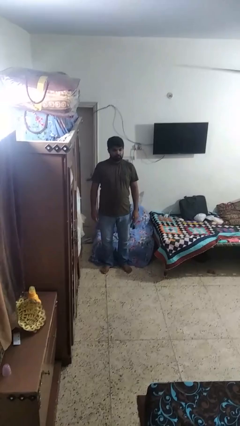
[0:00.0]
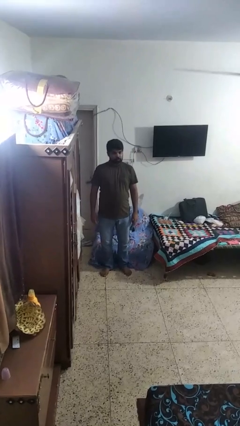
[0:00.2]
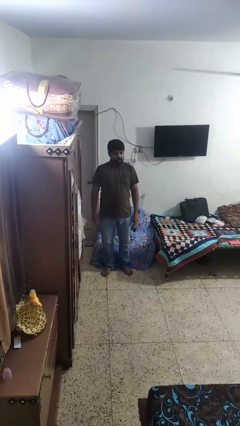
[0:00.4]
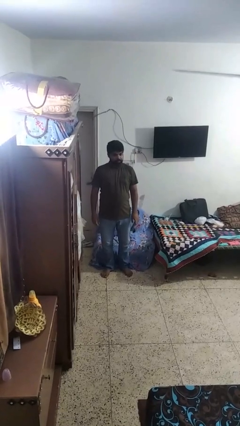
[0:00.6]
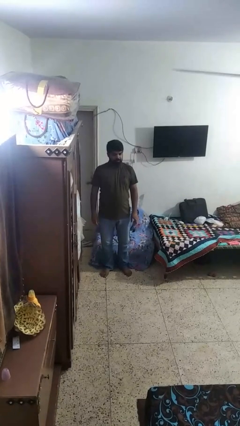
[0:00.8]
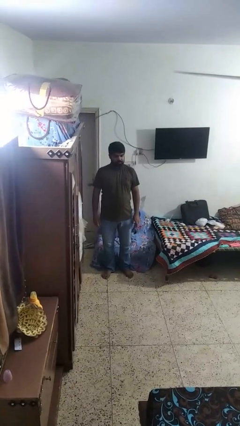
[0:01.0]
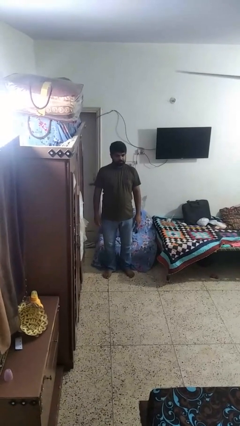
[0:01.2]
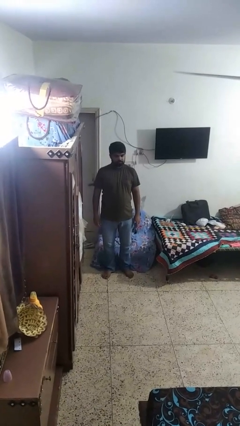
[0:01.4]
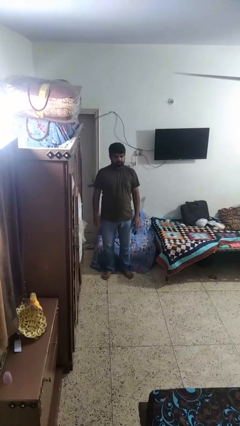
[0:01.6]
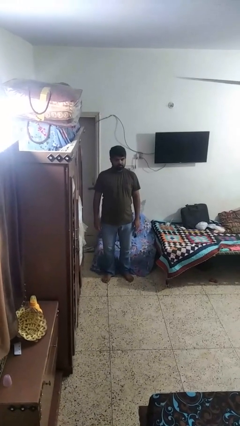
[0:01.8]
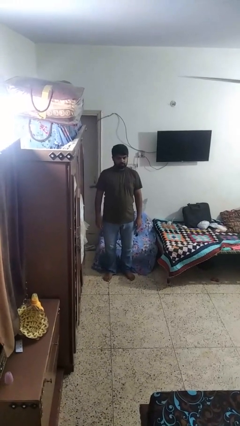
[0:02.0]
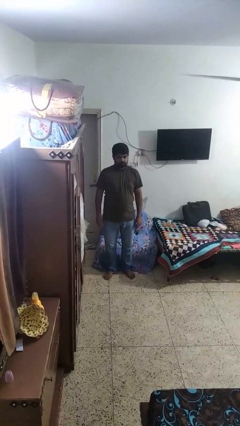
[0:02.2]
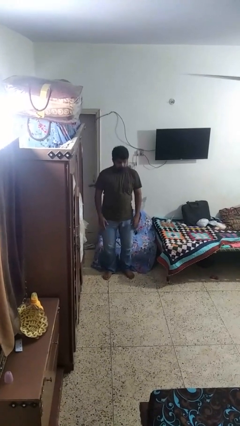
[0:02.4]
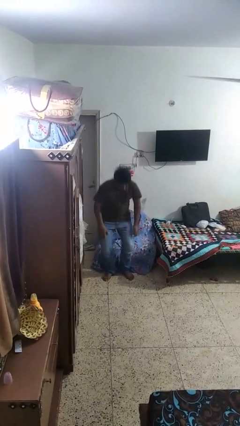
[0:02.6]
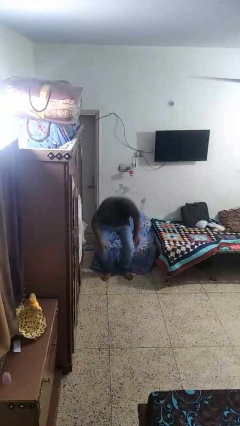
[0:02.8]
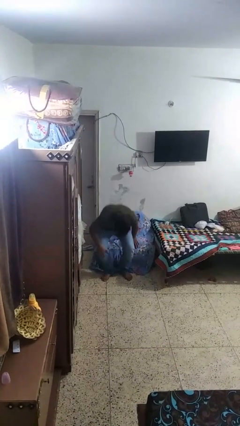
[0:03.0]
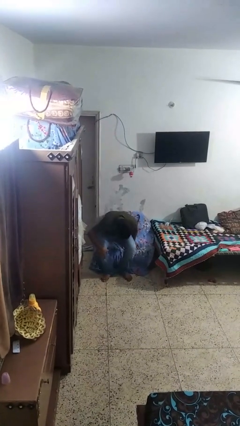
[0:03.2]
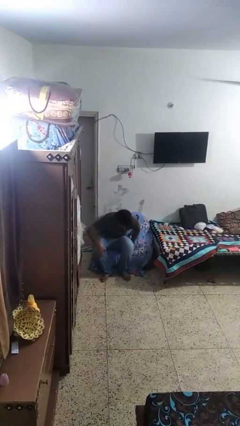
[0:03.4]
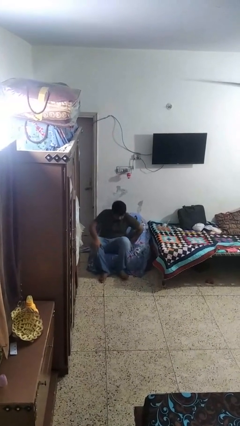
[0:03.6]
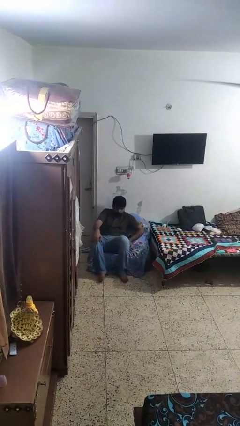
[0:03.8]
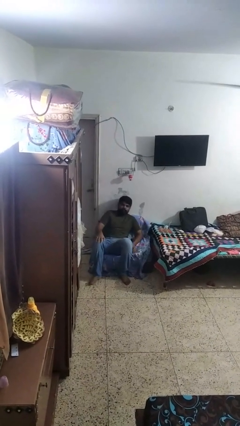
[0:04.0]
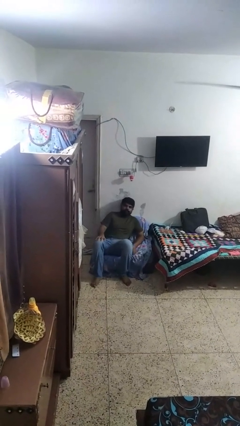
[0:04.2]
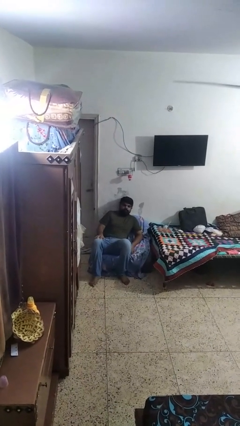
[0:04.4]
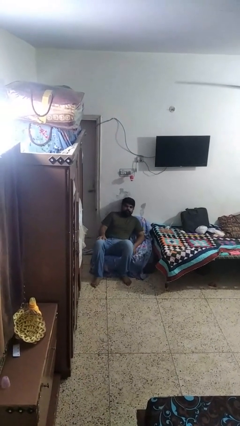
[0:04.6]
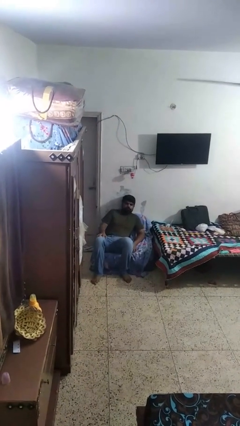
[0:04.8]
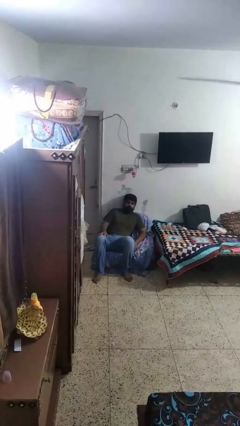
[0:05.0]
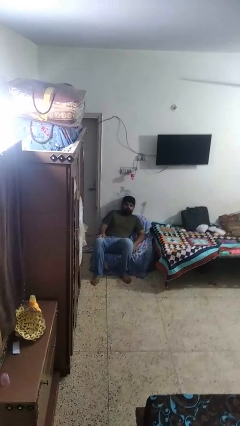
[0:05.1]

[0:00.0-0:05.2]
person lies down on couch

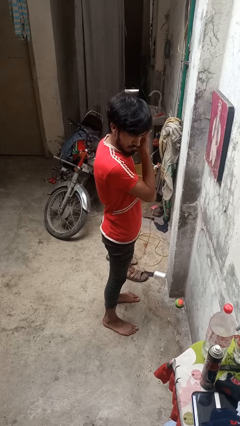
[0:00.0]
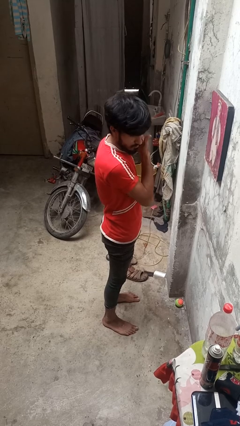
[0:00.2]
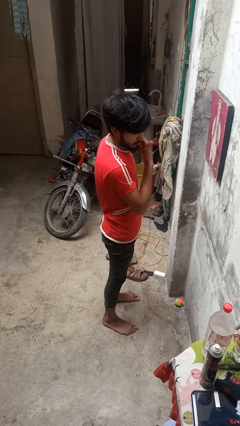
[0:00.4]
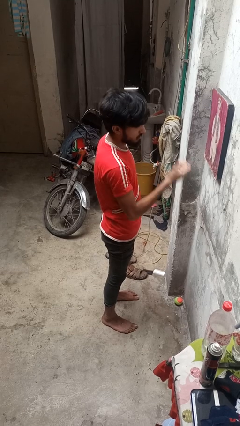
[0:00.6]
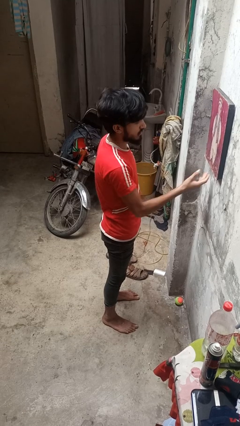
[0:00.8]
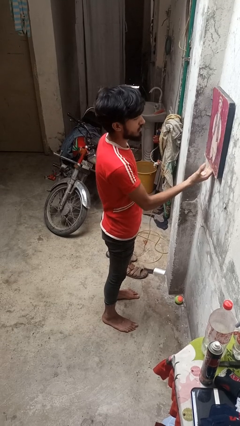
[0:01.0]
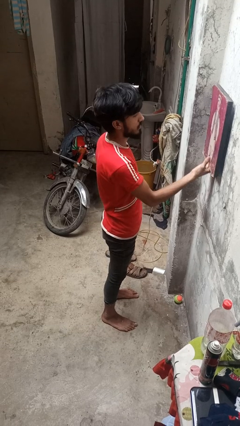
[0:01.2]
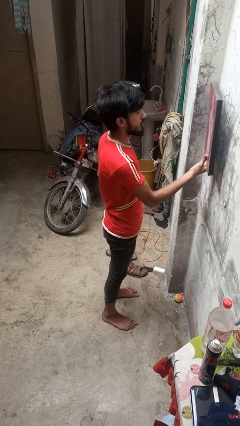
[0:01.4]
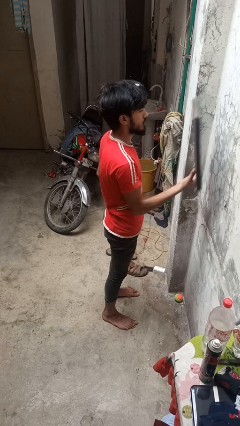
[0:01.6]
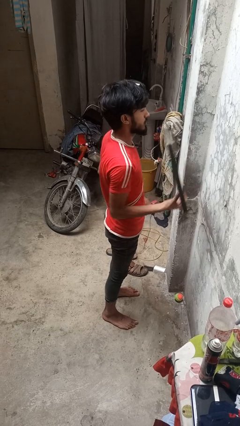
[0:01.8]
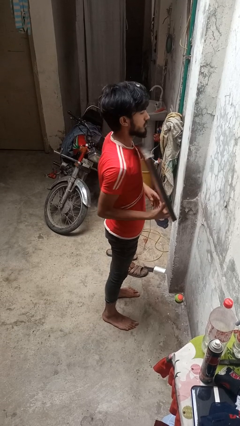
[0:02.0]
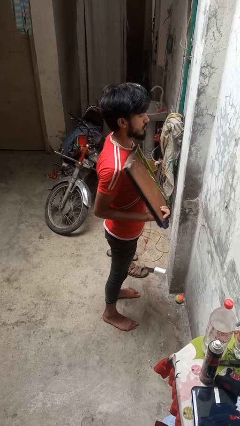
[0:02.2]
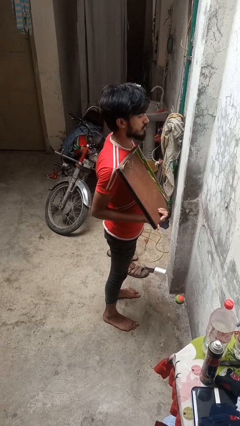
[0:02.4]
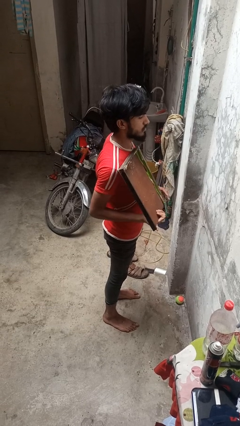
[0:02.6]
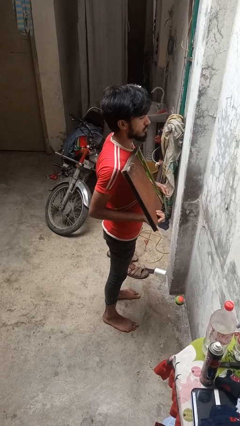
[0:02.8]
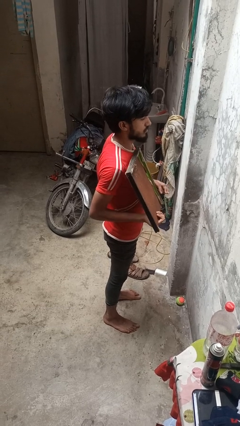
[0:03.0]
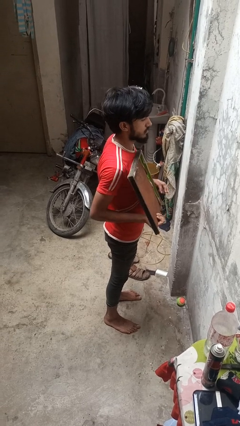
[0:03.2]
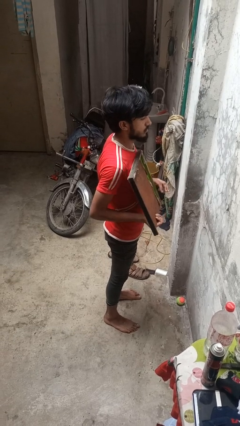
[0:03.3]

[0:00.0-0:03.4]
person takes down picture frame

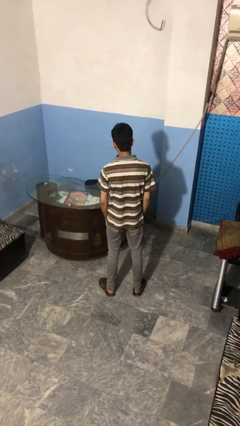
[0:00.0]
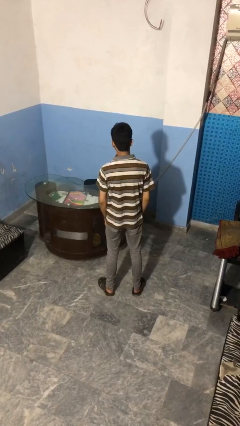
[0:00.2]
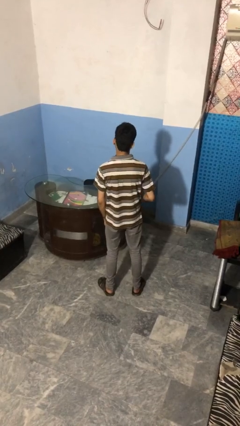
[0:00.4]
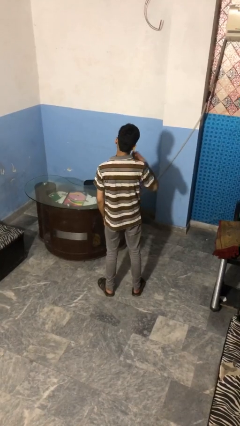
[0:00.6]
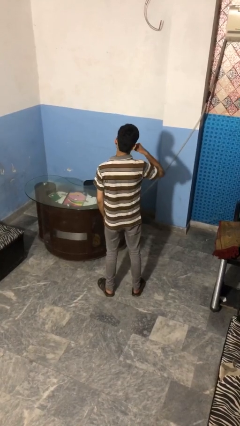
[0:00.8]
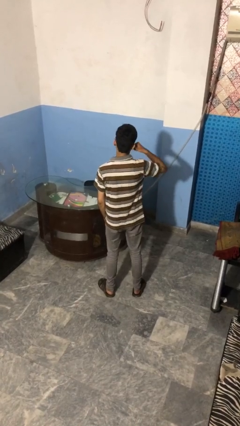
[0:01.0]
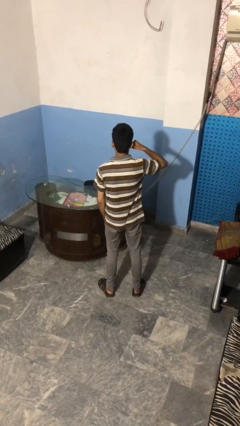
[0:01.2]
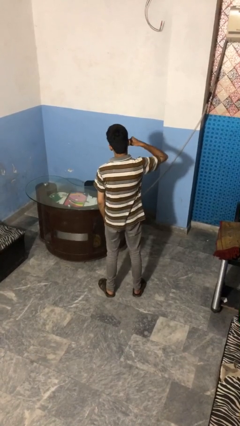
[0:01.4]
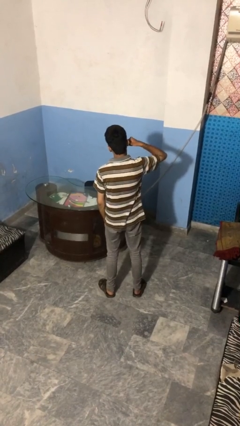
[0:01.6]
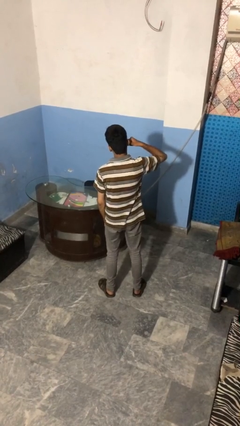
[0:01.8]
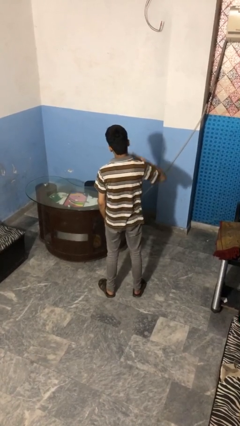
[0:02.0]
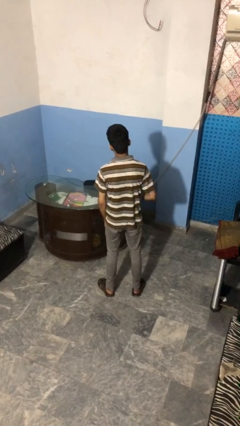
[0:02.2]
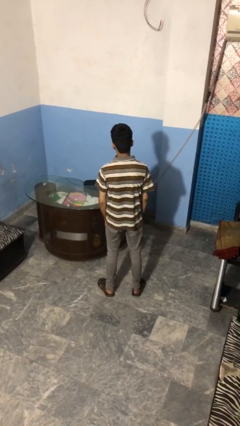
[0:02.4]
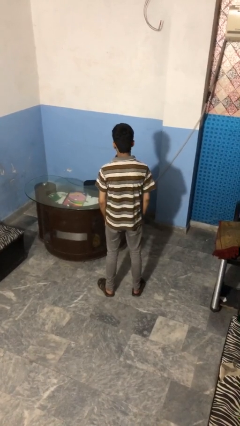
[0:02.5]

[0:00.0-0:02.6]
person gestures call me

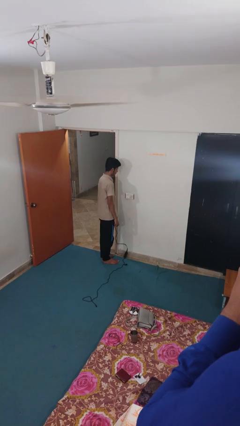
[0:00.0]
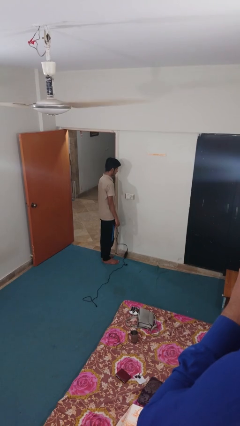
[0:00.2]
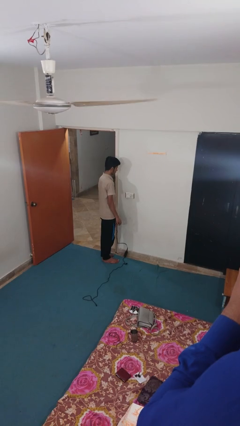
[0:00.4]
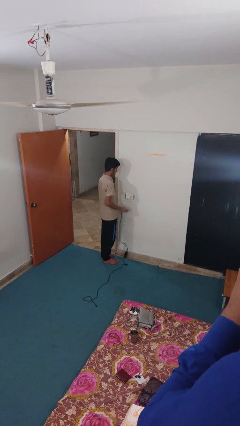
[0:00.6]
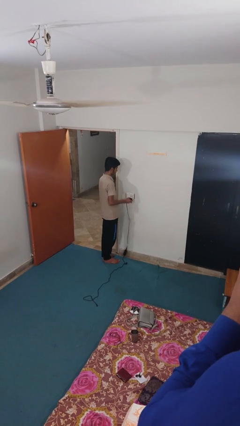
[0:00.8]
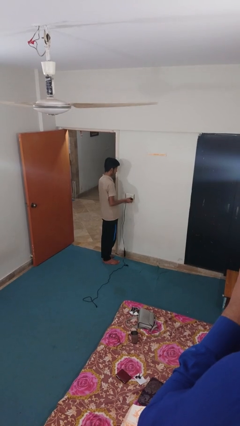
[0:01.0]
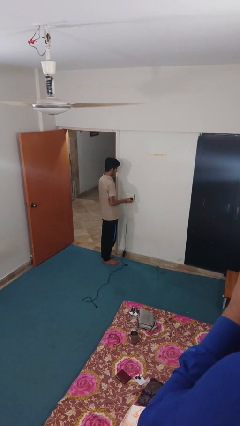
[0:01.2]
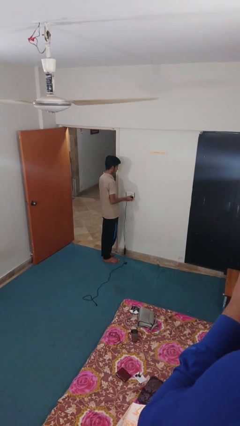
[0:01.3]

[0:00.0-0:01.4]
person plugs into electrical socket

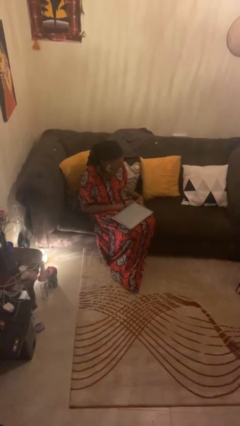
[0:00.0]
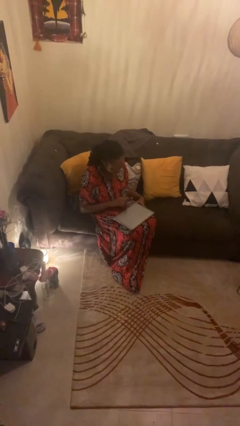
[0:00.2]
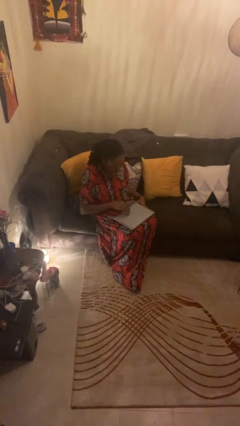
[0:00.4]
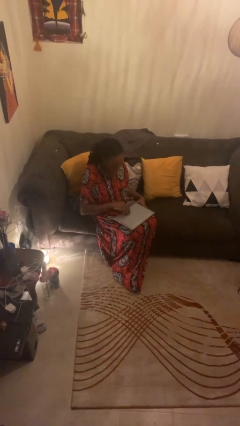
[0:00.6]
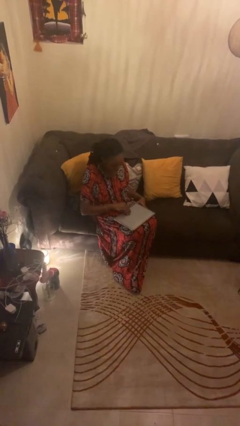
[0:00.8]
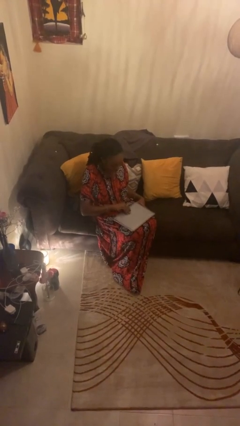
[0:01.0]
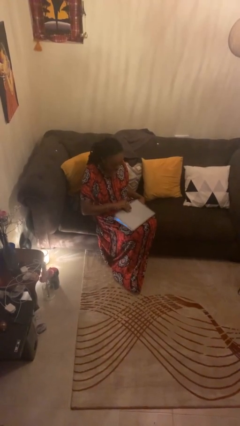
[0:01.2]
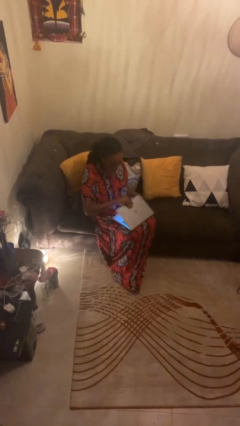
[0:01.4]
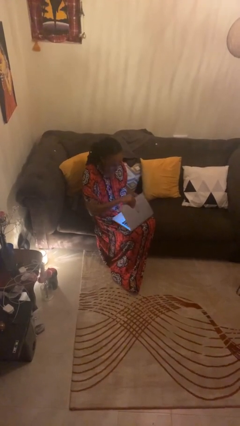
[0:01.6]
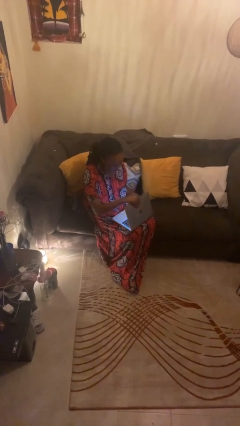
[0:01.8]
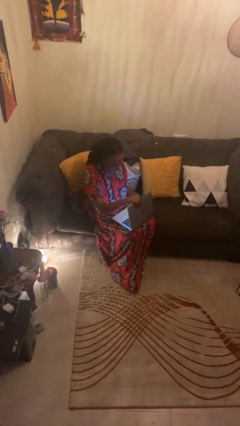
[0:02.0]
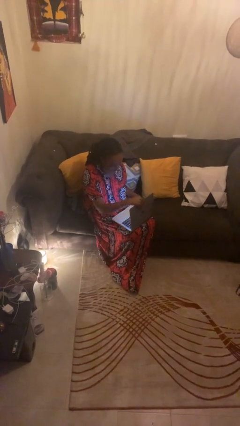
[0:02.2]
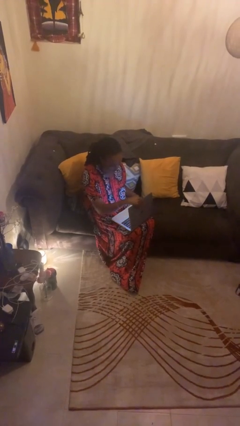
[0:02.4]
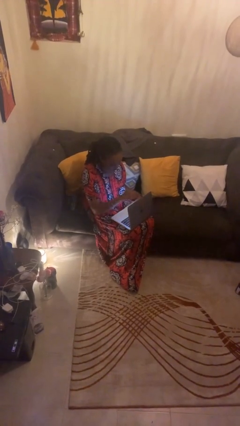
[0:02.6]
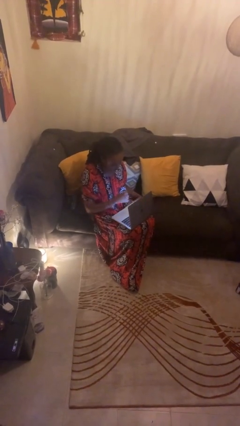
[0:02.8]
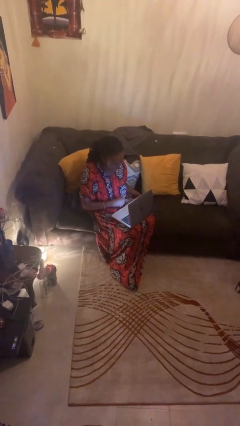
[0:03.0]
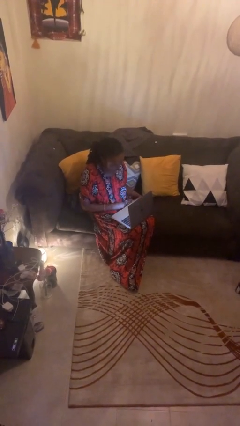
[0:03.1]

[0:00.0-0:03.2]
person opens laptop

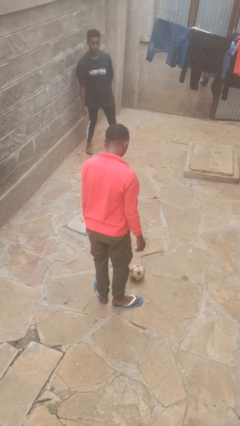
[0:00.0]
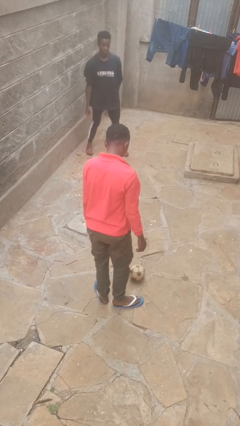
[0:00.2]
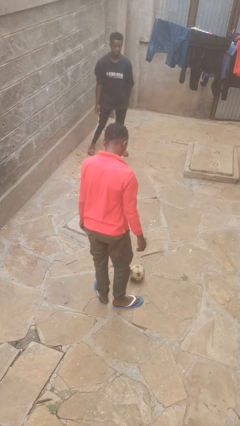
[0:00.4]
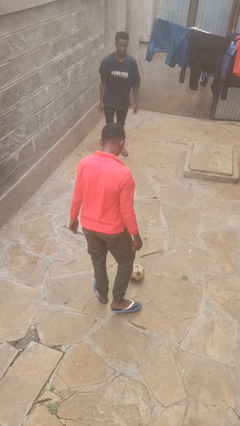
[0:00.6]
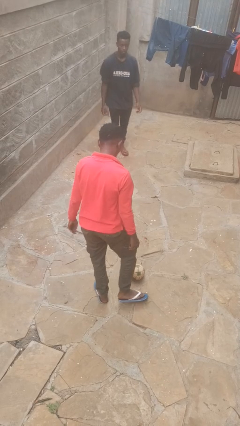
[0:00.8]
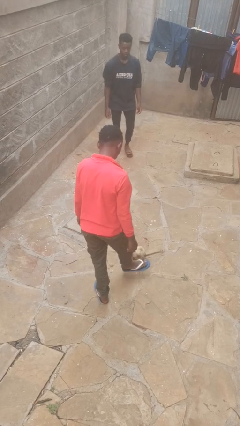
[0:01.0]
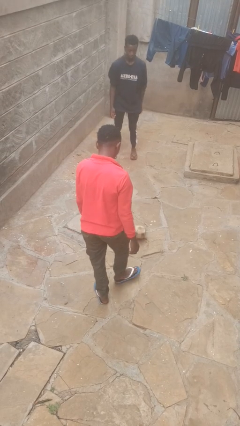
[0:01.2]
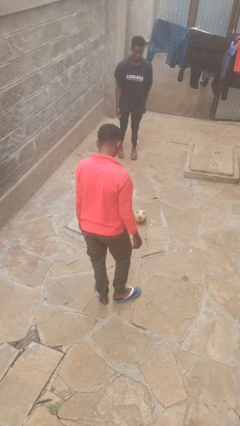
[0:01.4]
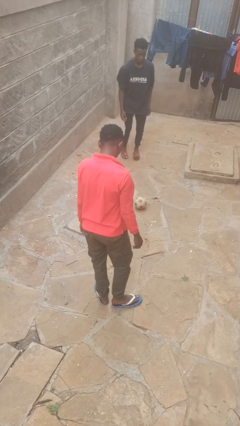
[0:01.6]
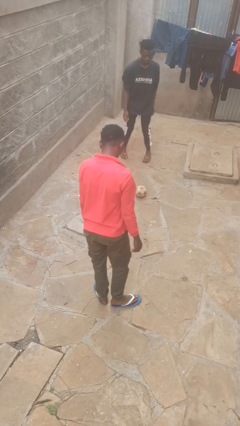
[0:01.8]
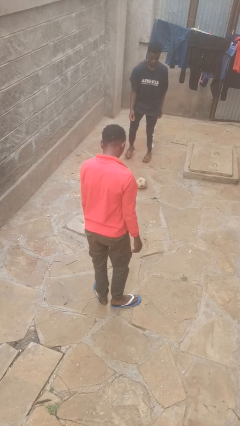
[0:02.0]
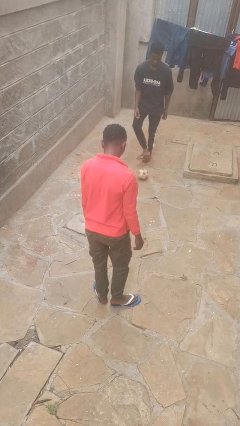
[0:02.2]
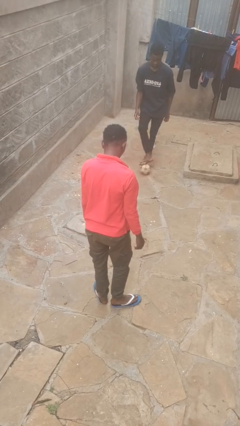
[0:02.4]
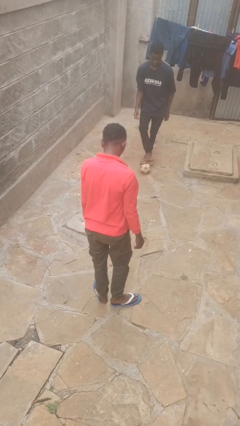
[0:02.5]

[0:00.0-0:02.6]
person kicks object to person
